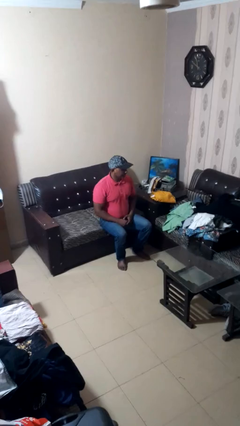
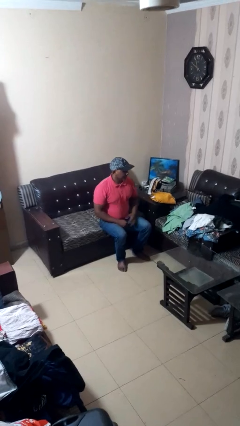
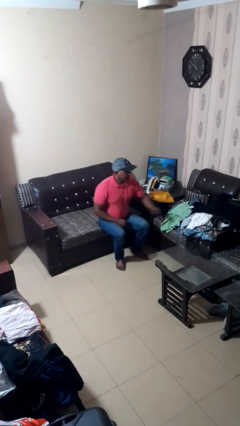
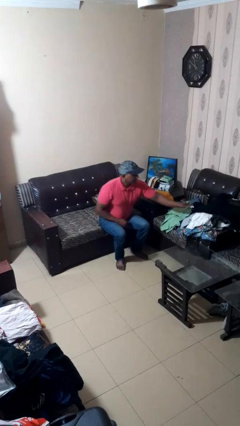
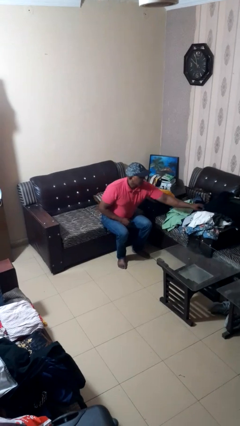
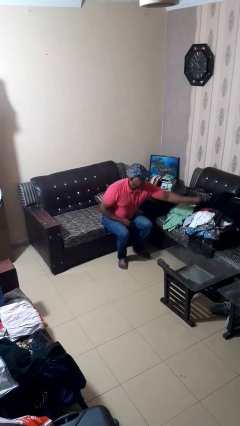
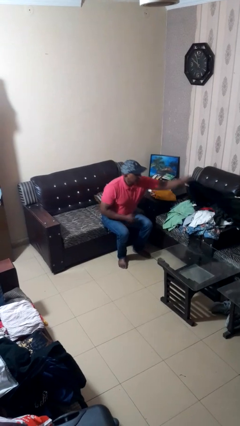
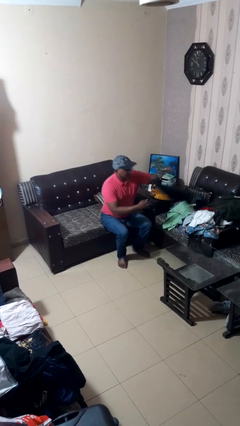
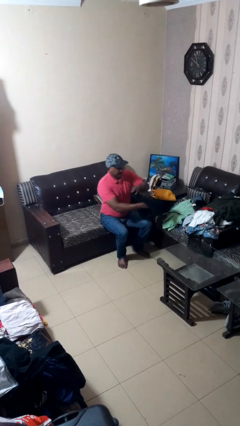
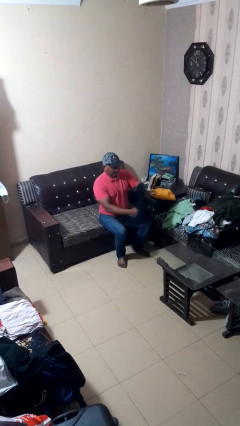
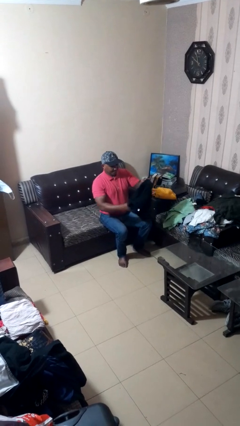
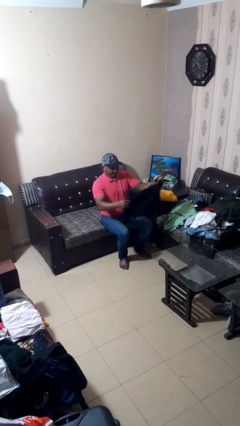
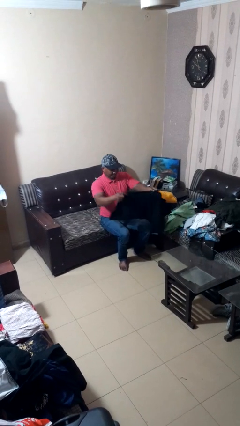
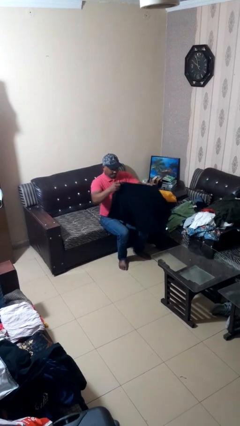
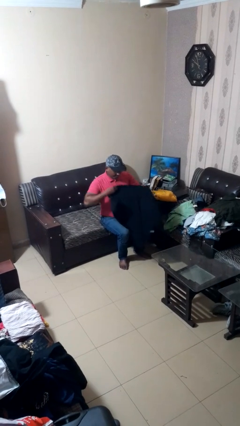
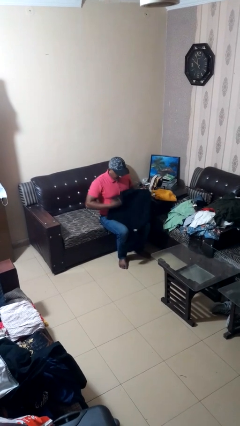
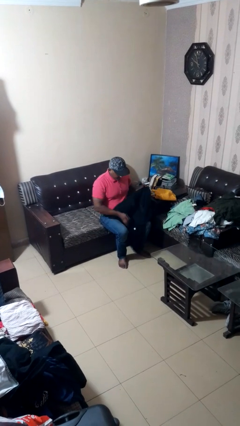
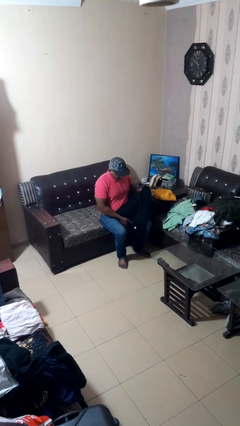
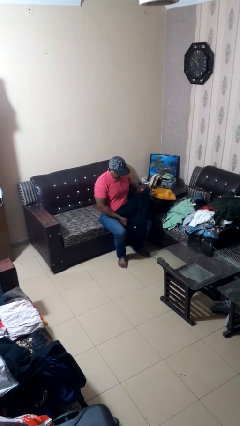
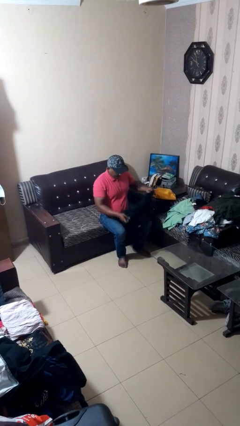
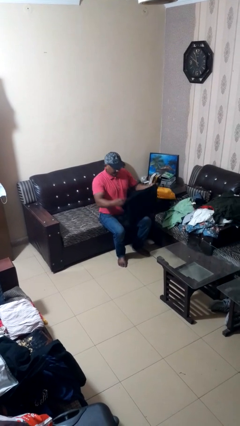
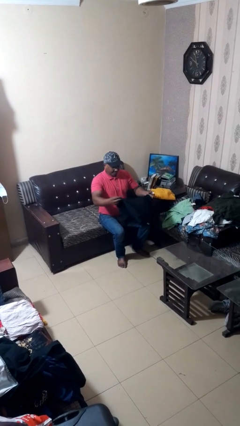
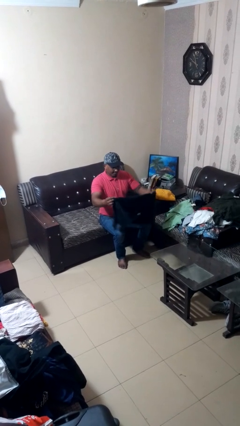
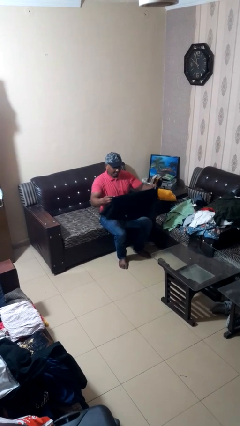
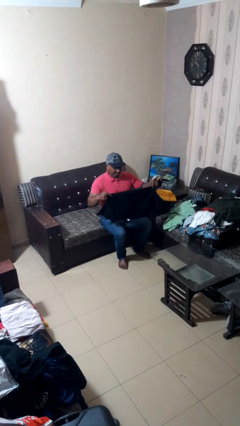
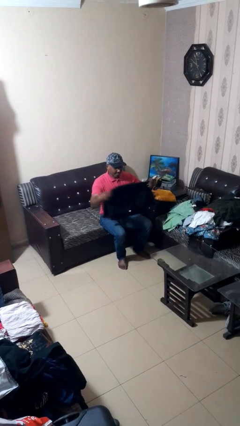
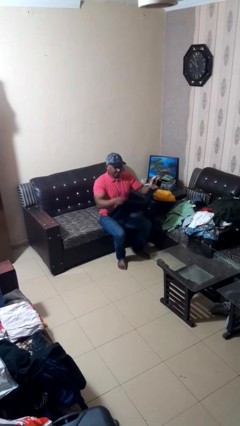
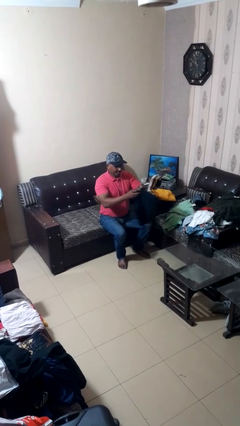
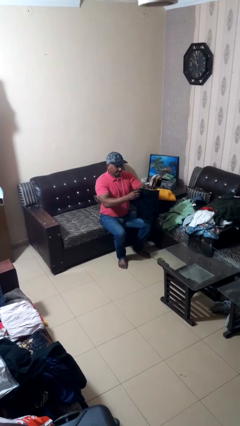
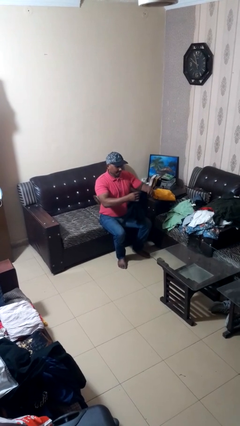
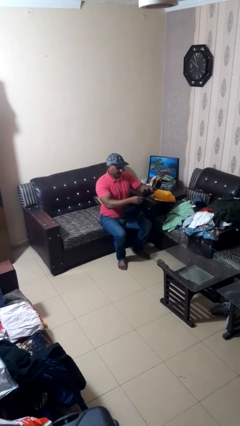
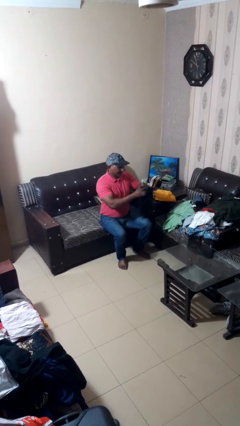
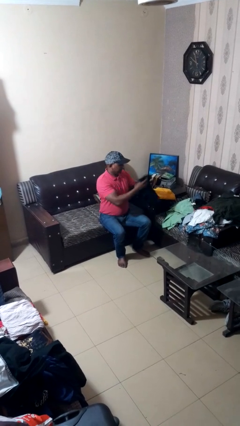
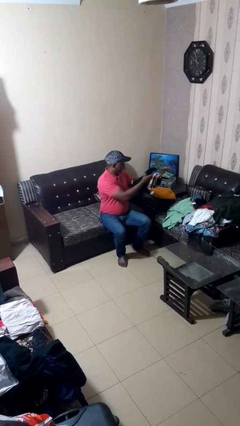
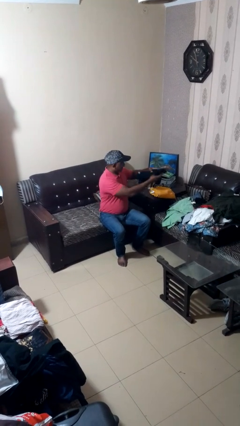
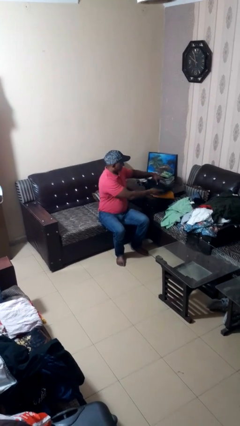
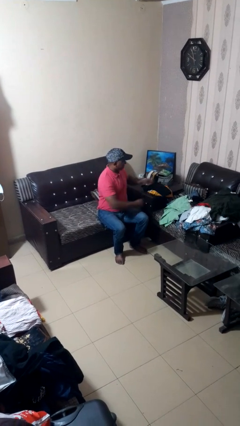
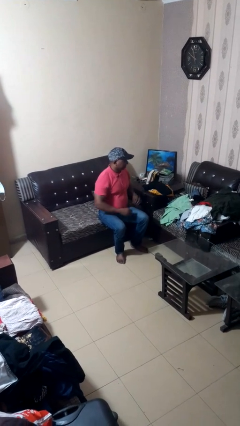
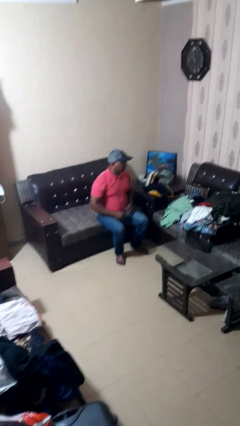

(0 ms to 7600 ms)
person folds shirt

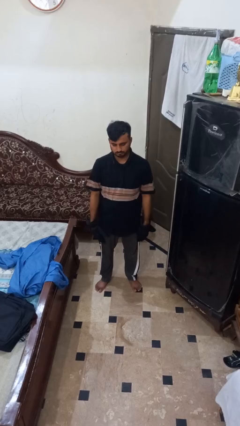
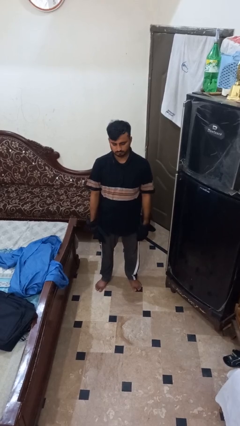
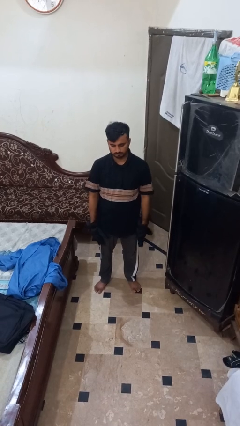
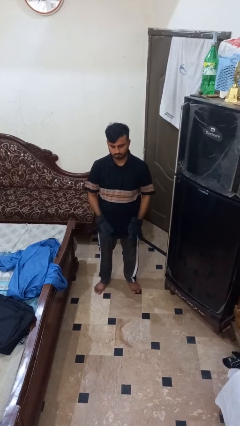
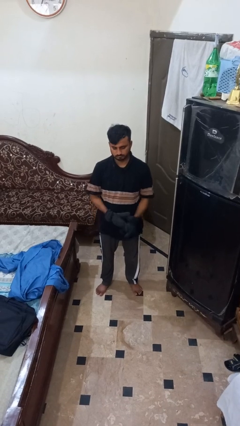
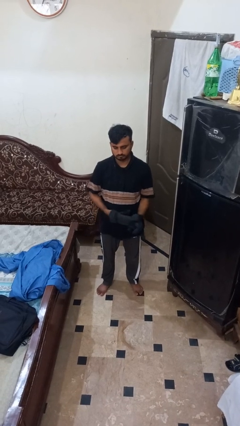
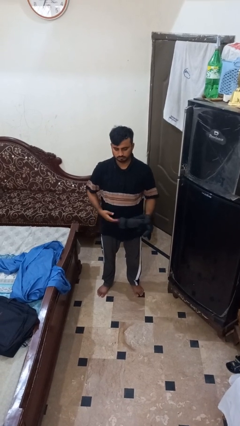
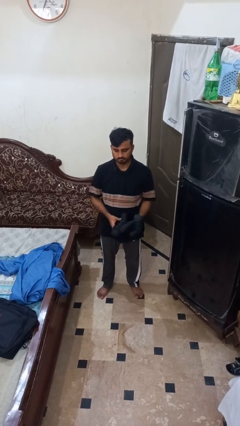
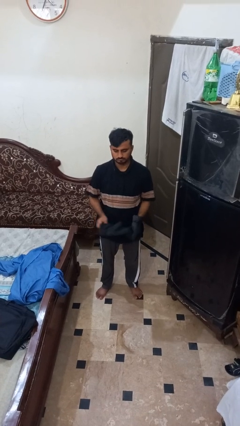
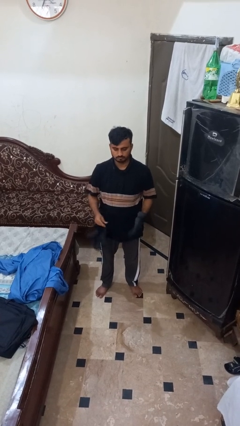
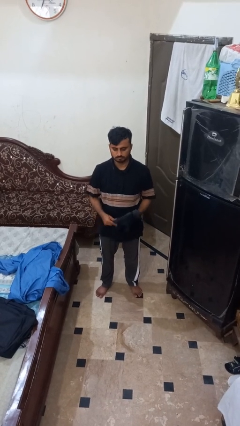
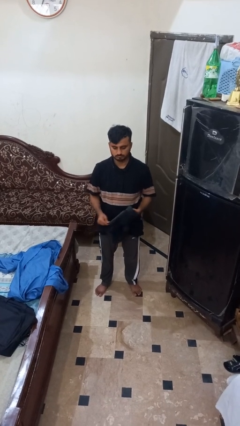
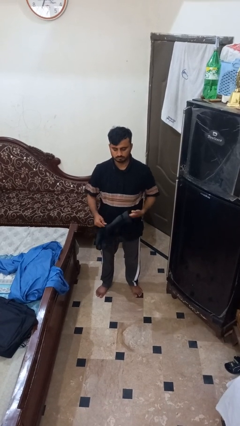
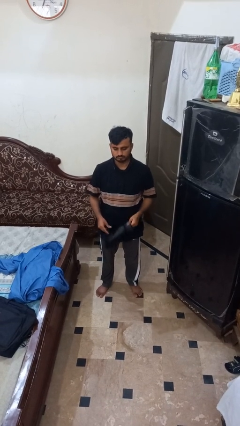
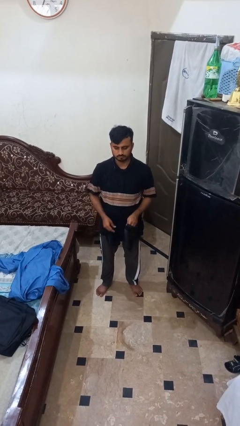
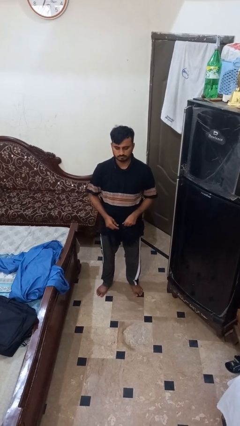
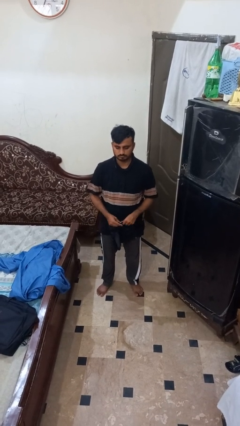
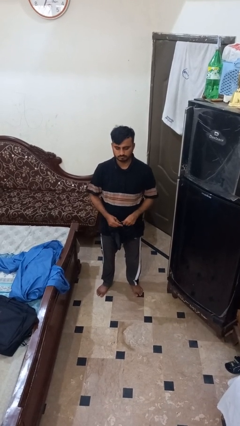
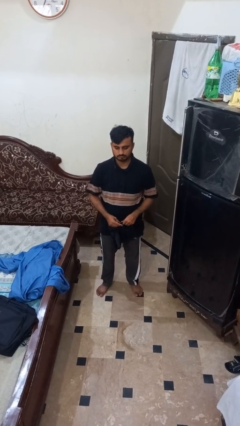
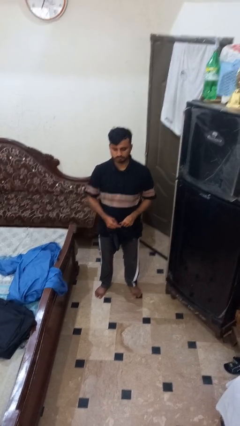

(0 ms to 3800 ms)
person takes off gloves

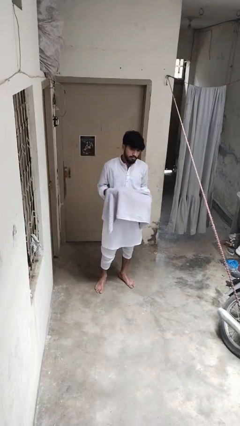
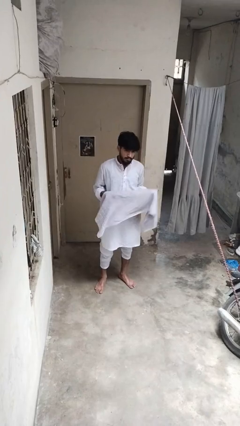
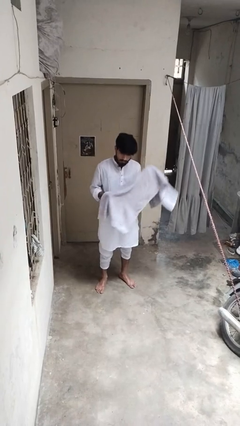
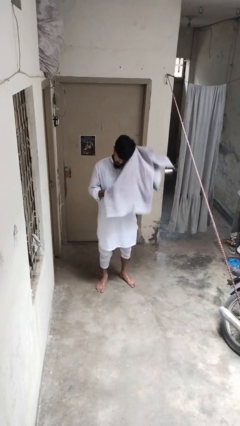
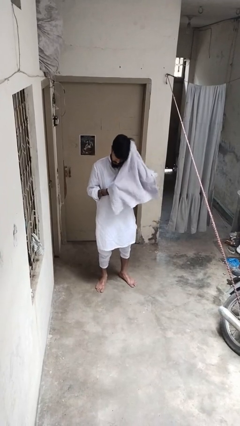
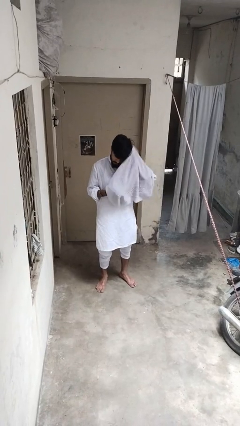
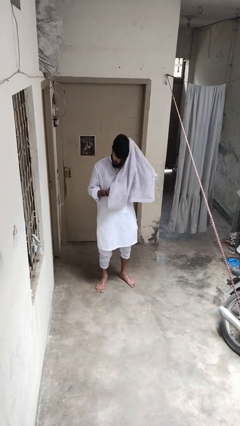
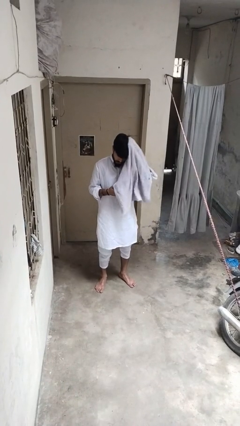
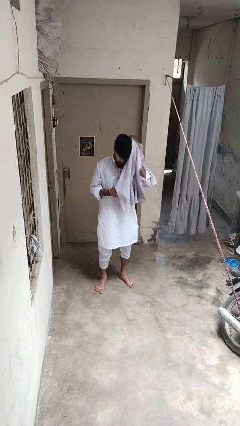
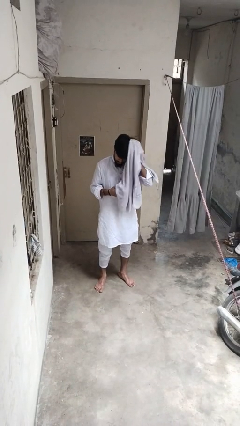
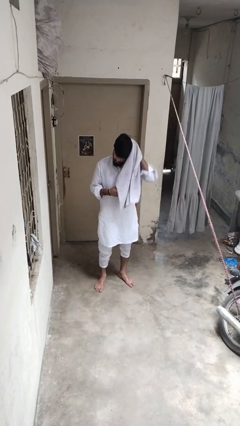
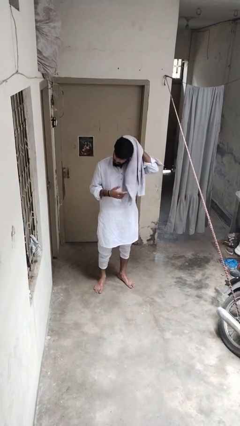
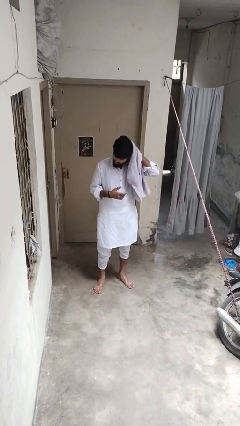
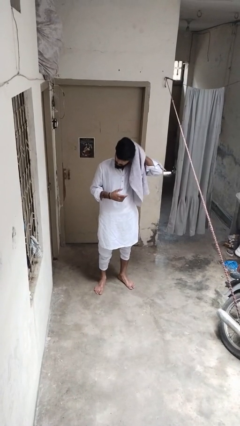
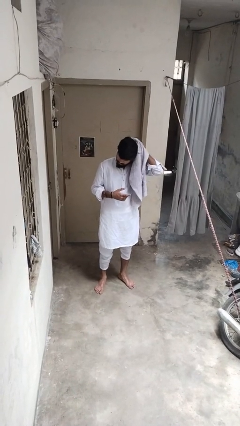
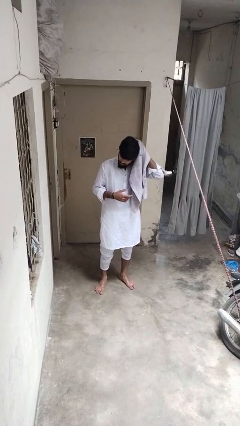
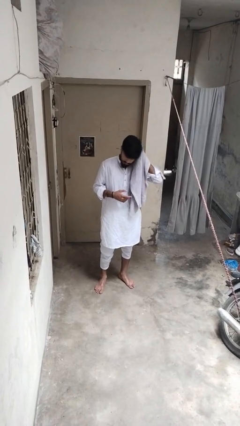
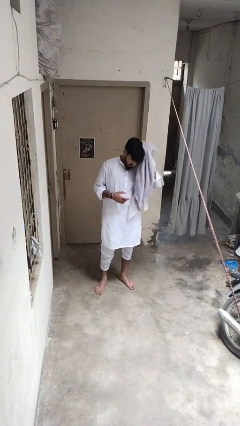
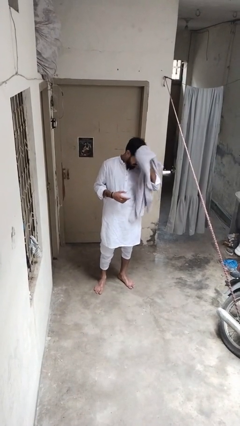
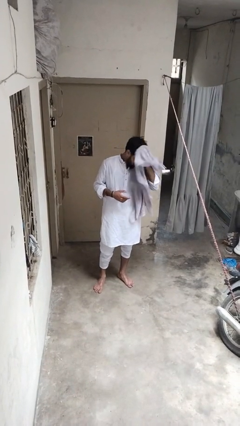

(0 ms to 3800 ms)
person dries hair with towel

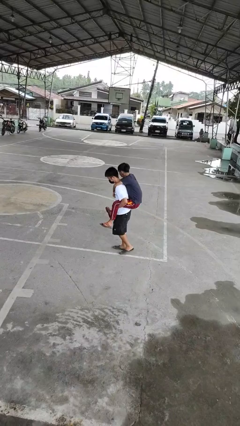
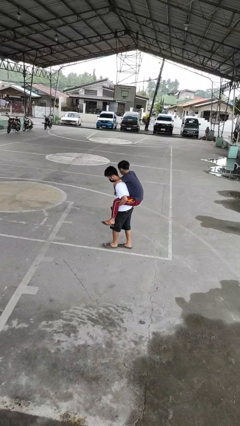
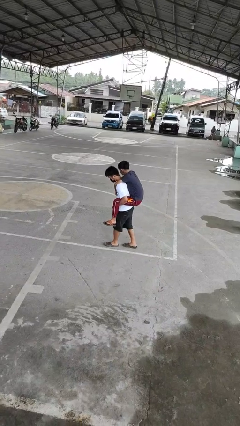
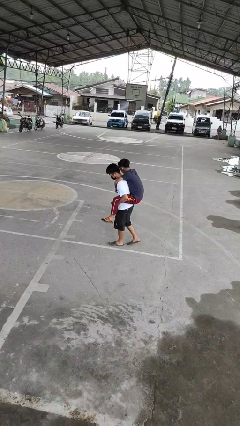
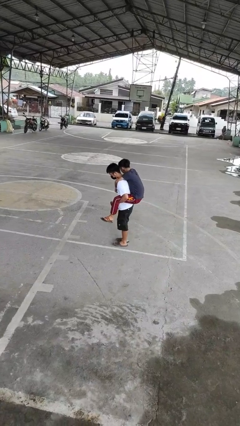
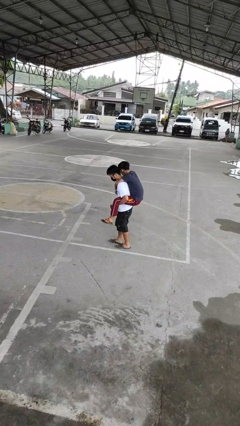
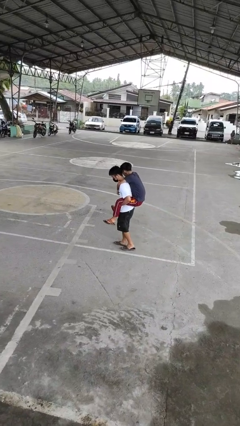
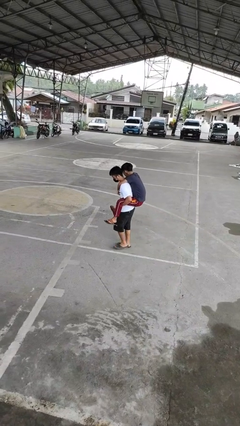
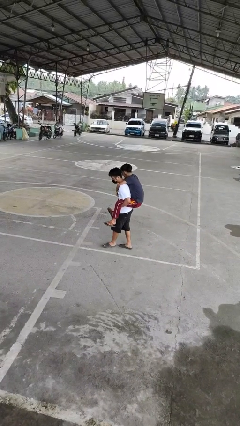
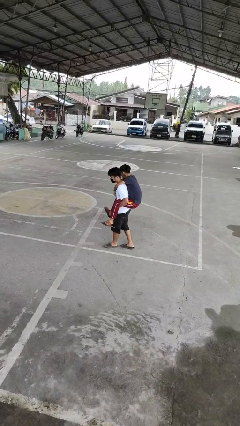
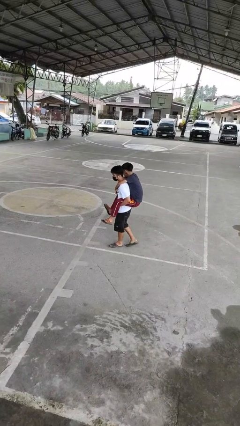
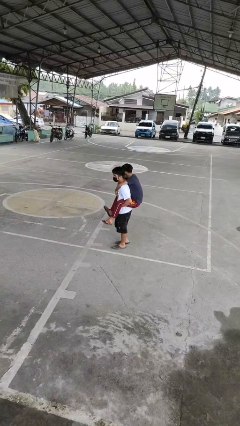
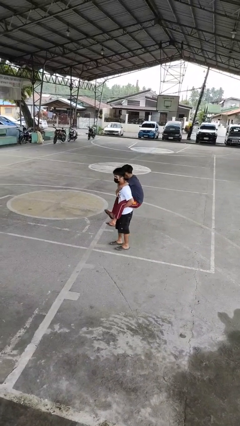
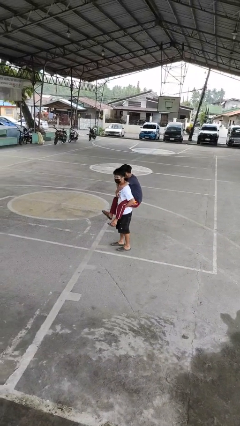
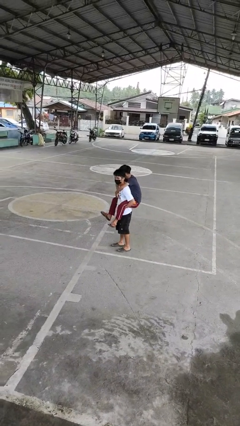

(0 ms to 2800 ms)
person carries person on back
